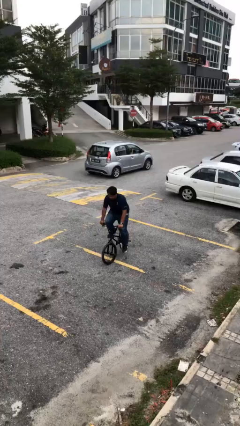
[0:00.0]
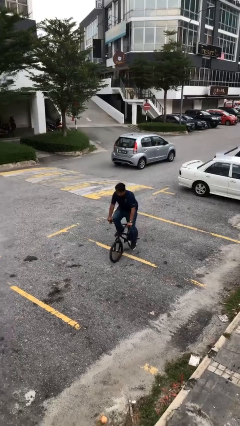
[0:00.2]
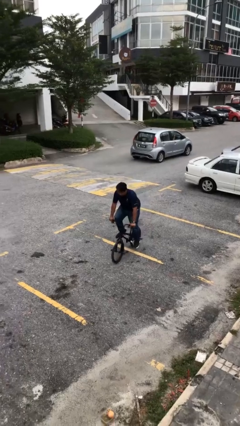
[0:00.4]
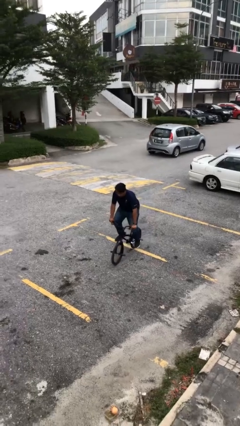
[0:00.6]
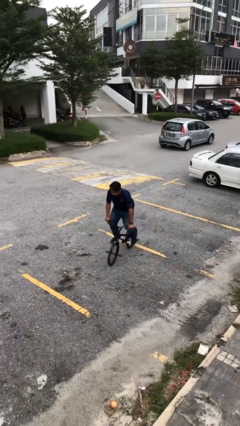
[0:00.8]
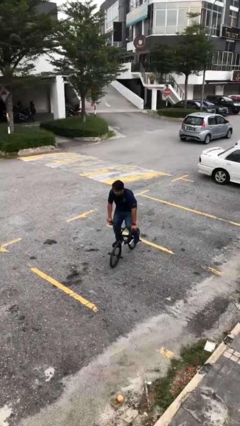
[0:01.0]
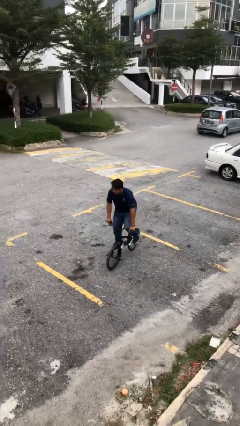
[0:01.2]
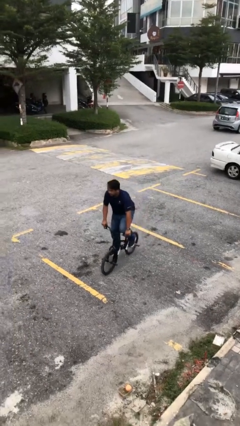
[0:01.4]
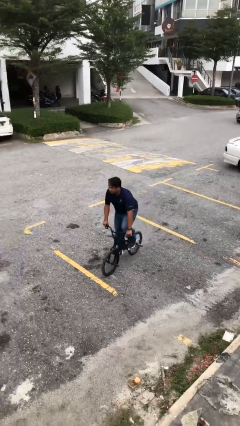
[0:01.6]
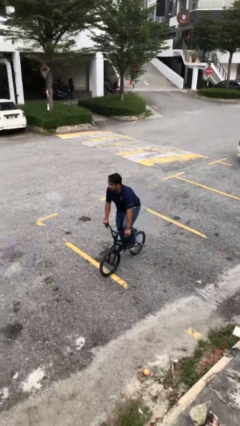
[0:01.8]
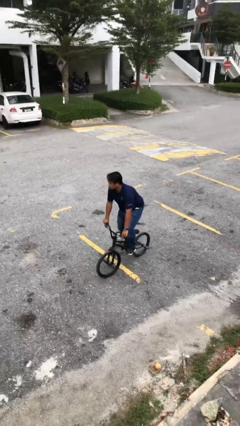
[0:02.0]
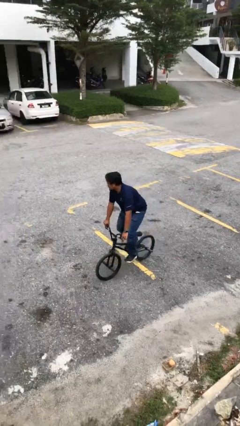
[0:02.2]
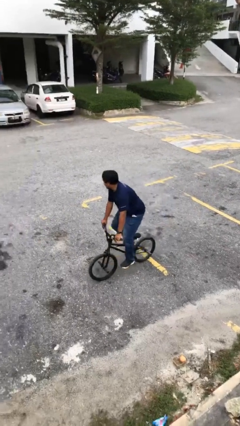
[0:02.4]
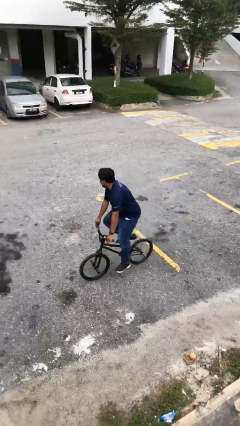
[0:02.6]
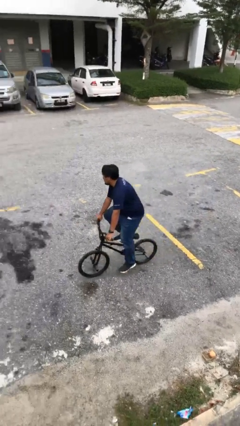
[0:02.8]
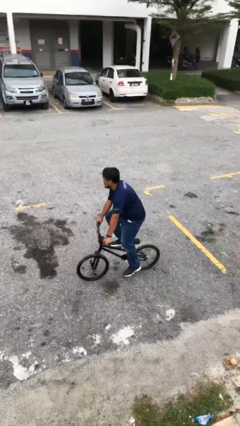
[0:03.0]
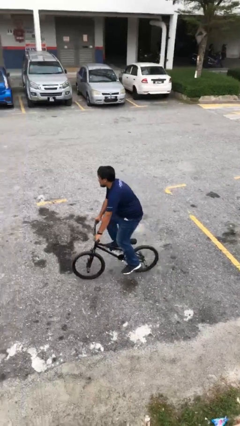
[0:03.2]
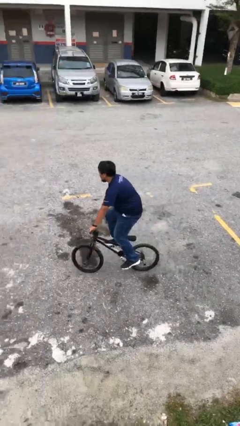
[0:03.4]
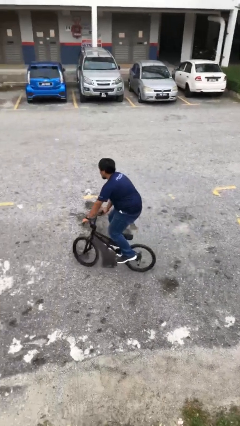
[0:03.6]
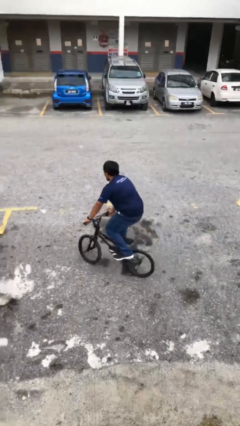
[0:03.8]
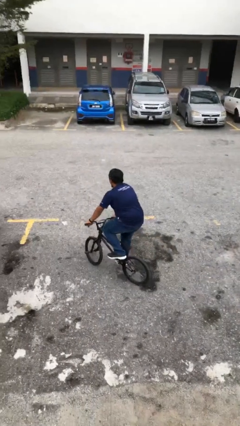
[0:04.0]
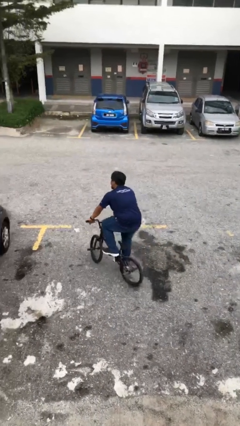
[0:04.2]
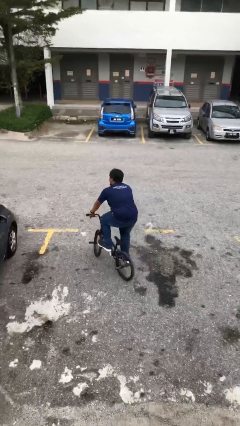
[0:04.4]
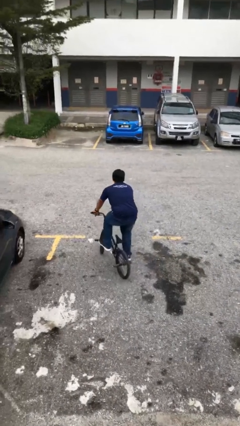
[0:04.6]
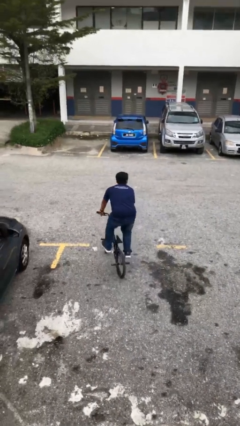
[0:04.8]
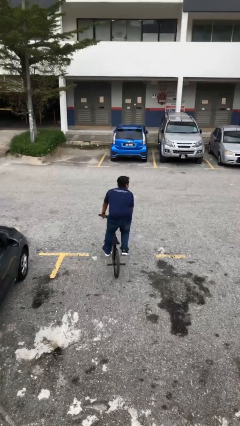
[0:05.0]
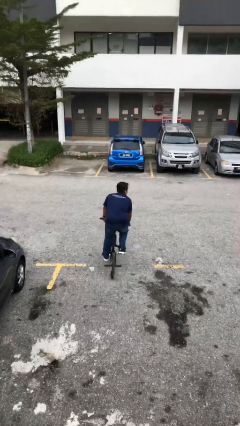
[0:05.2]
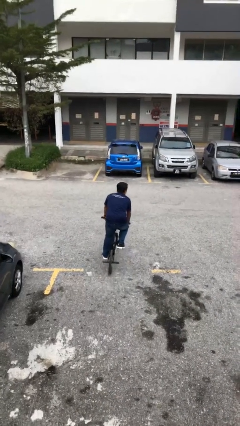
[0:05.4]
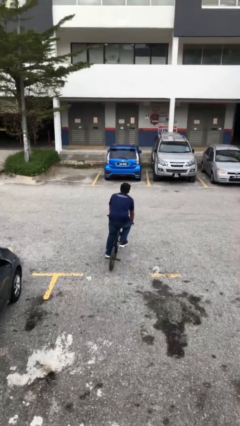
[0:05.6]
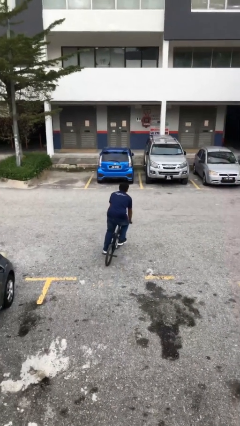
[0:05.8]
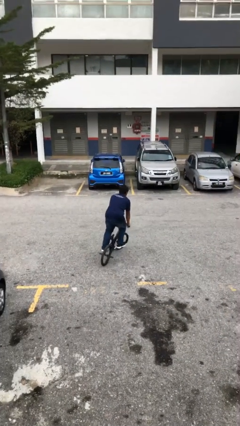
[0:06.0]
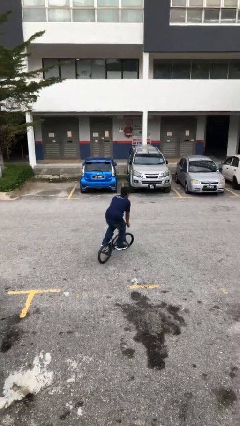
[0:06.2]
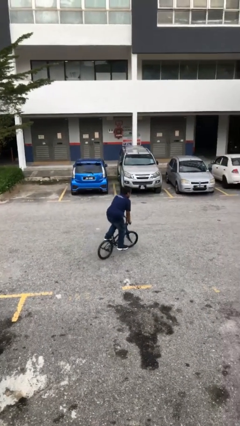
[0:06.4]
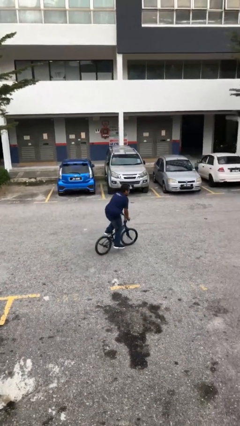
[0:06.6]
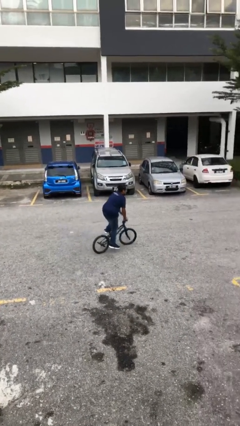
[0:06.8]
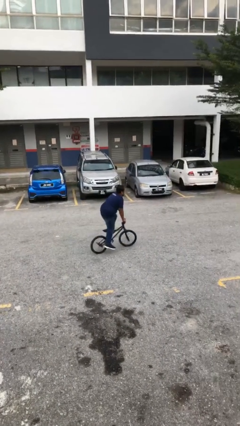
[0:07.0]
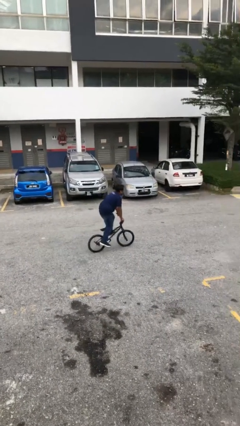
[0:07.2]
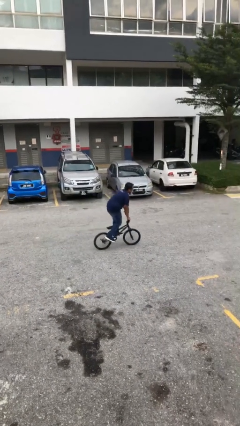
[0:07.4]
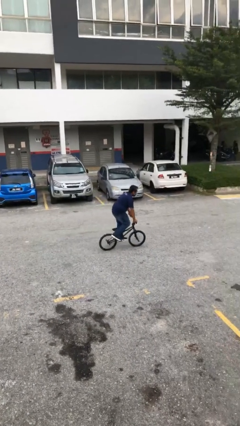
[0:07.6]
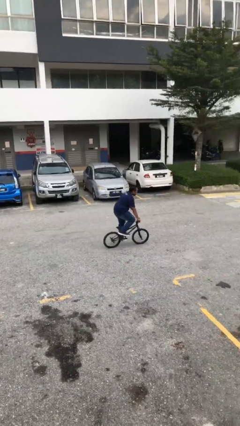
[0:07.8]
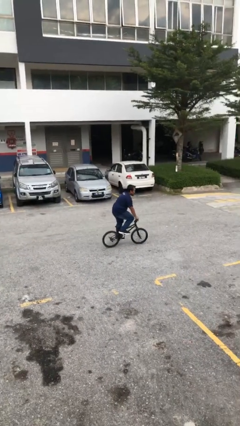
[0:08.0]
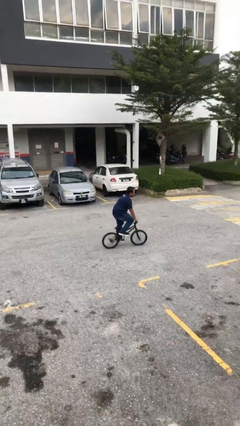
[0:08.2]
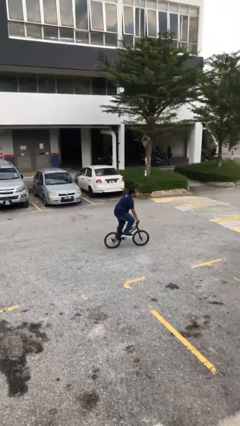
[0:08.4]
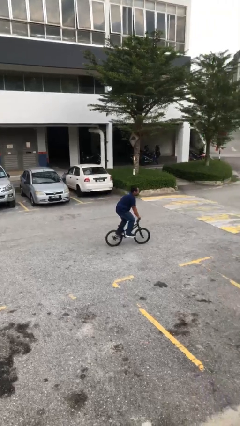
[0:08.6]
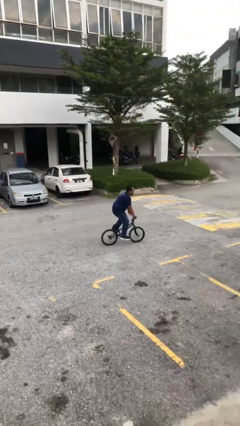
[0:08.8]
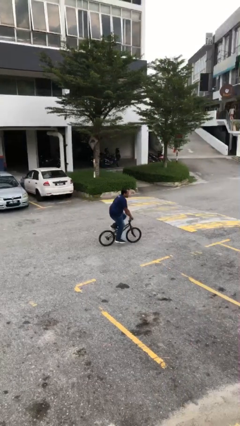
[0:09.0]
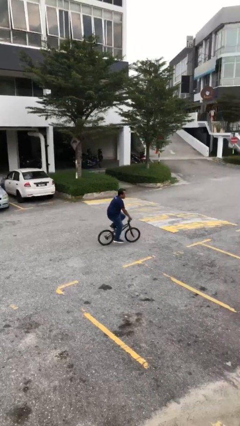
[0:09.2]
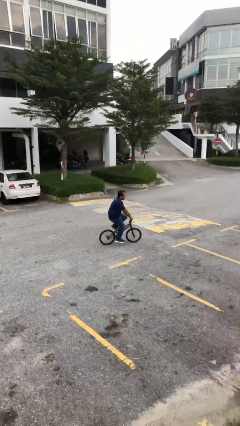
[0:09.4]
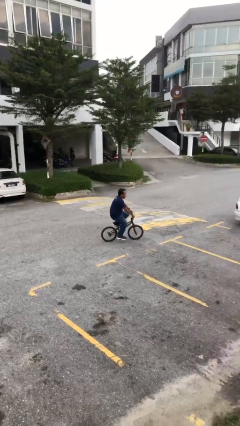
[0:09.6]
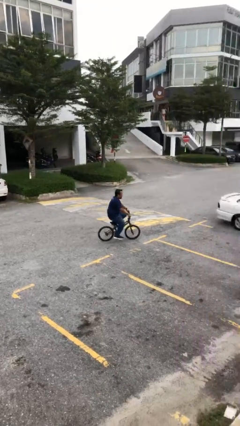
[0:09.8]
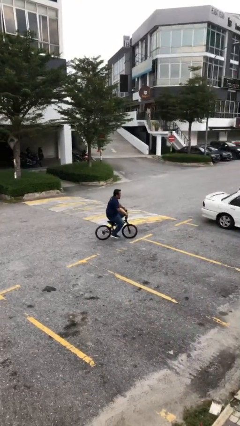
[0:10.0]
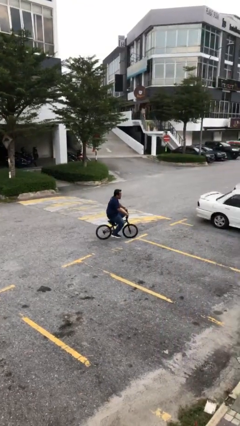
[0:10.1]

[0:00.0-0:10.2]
person rides bicycle

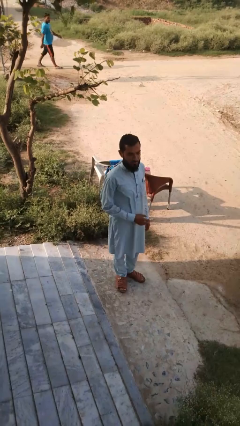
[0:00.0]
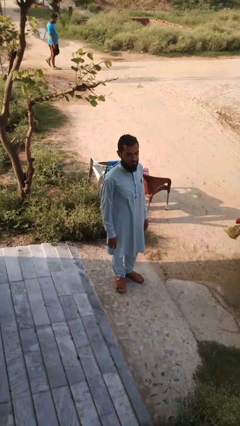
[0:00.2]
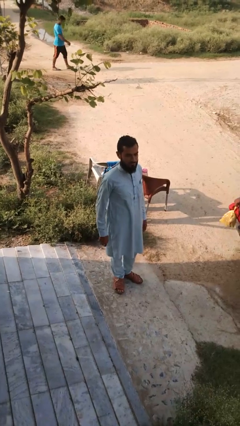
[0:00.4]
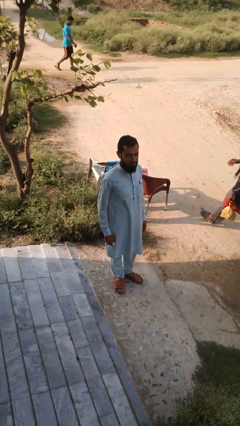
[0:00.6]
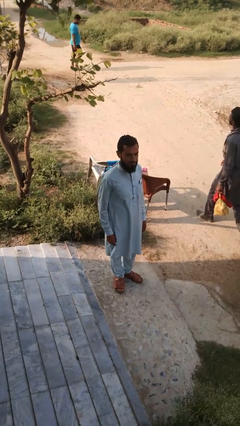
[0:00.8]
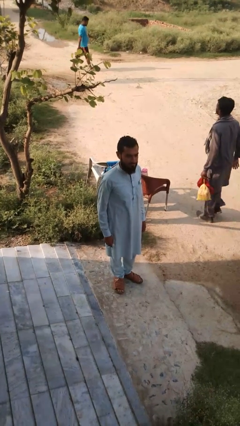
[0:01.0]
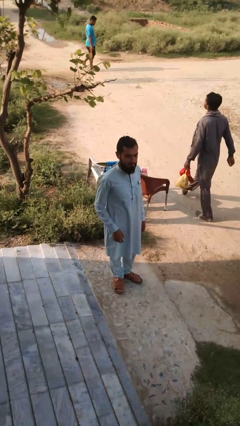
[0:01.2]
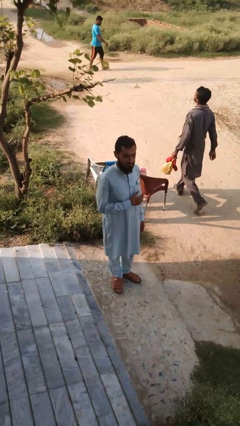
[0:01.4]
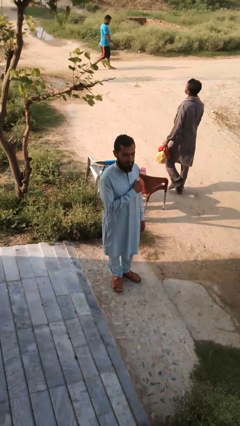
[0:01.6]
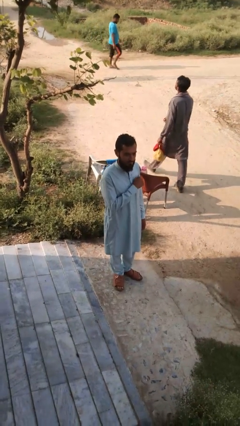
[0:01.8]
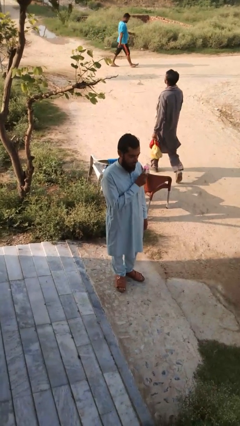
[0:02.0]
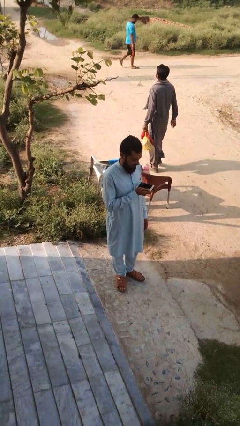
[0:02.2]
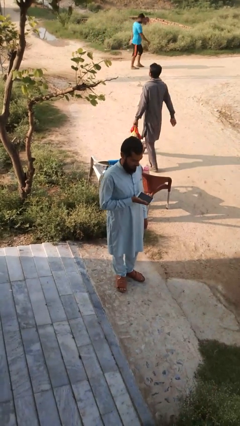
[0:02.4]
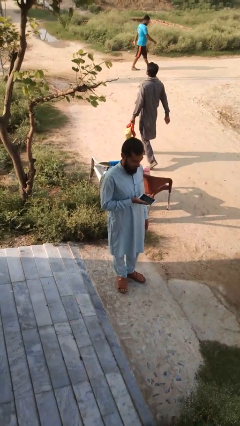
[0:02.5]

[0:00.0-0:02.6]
person takes phone from pocket

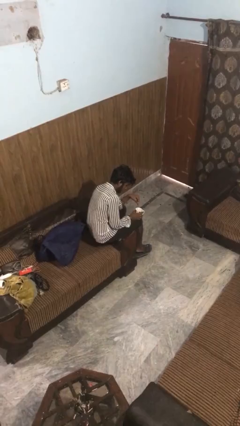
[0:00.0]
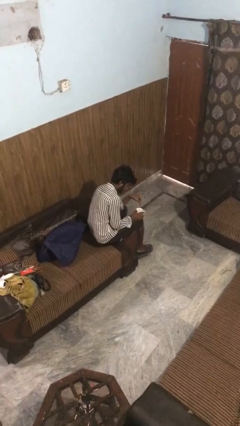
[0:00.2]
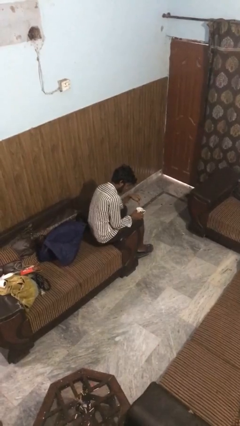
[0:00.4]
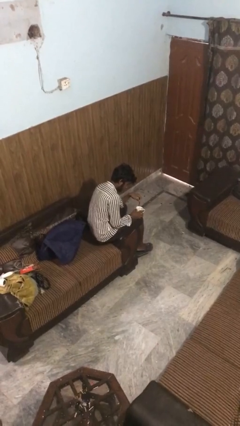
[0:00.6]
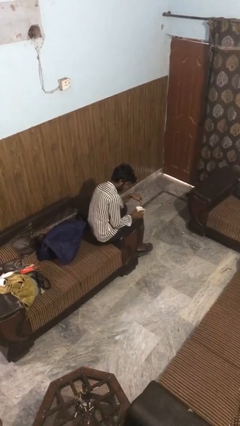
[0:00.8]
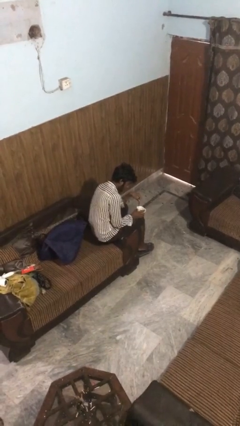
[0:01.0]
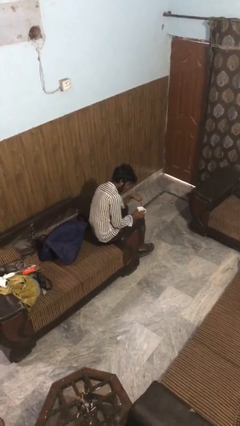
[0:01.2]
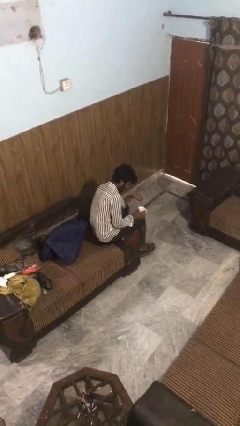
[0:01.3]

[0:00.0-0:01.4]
person stirs mug

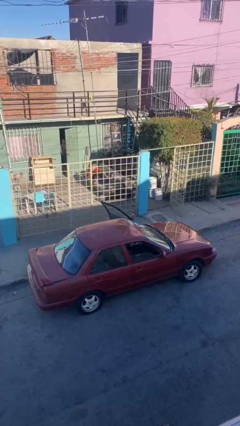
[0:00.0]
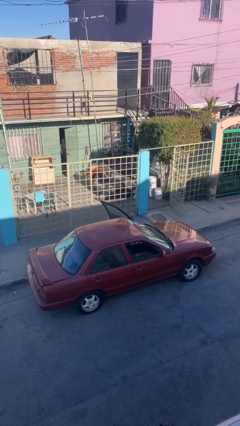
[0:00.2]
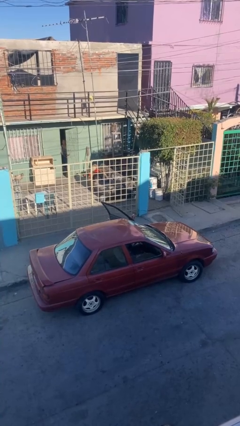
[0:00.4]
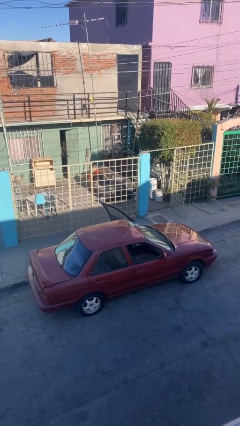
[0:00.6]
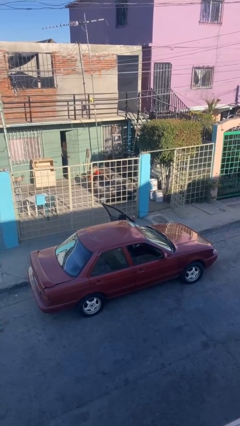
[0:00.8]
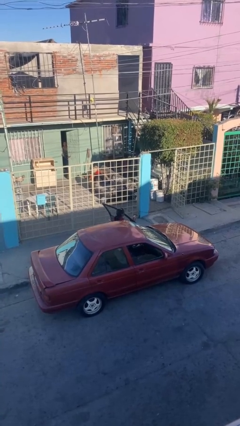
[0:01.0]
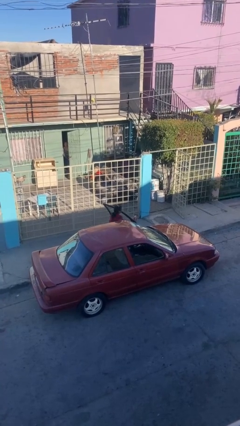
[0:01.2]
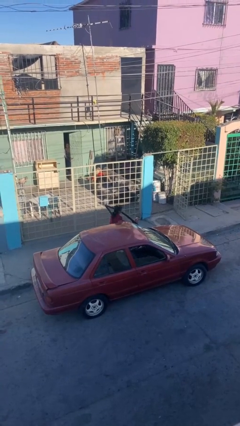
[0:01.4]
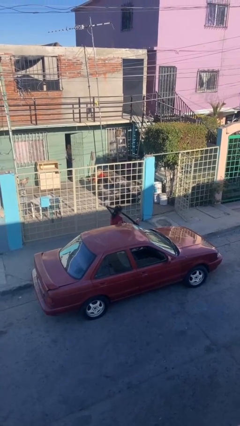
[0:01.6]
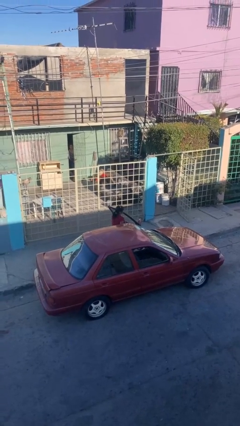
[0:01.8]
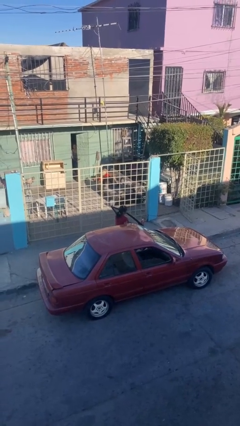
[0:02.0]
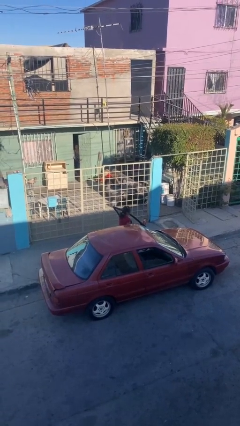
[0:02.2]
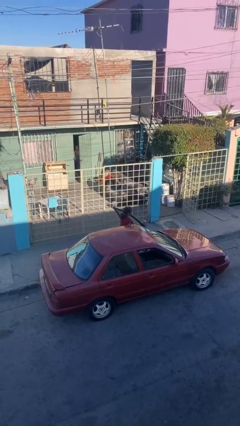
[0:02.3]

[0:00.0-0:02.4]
person exits car

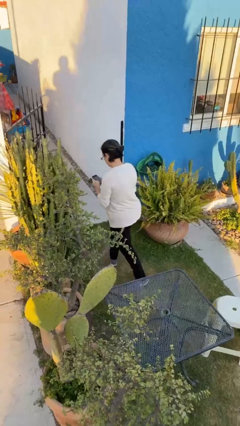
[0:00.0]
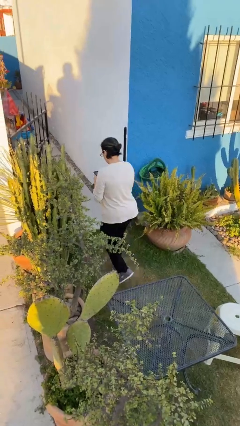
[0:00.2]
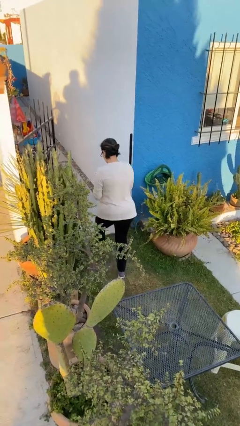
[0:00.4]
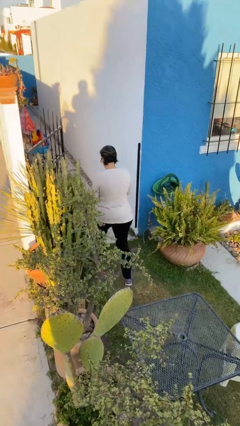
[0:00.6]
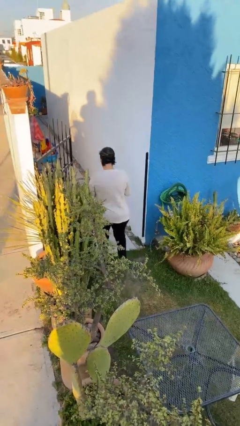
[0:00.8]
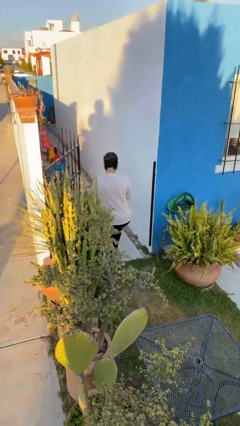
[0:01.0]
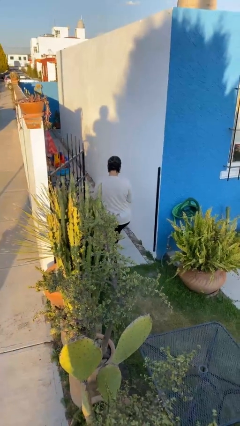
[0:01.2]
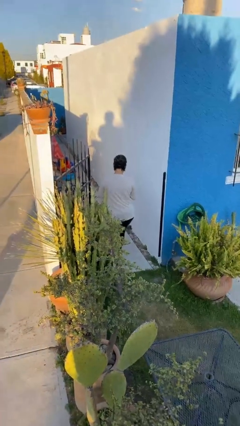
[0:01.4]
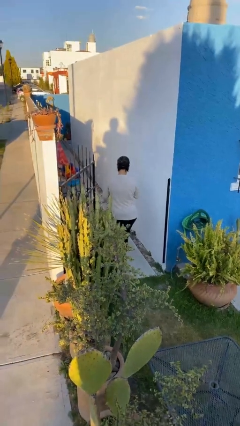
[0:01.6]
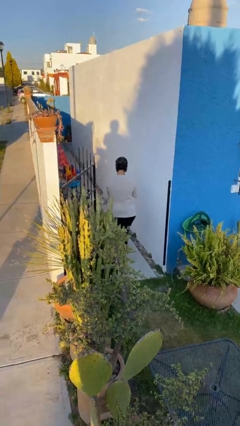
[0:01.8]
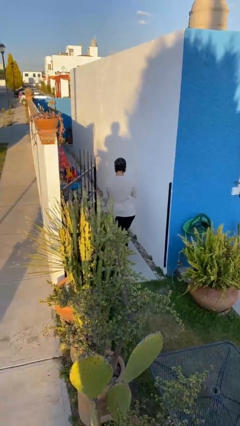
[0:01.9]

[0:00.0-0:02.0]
person exits scene through structure
